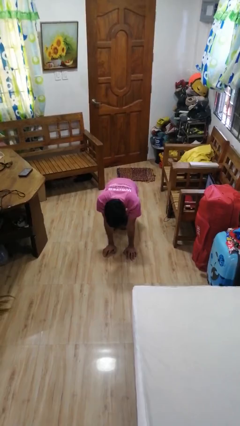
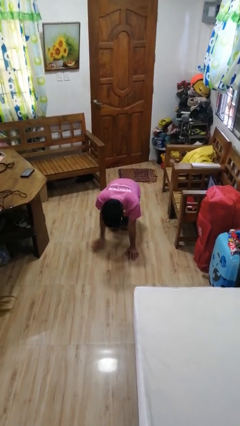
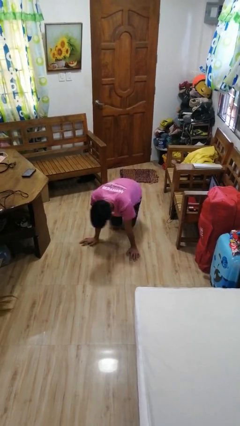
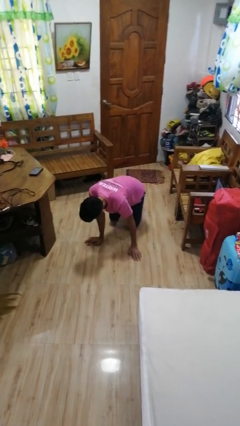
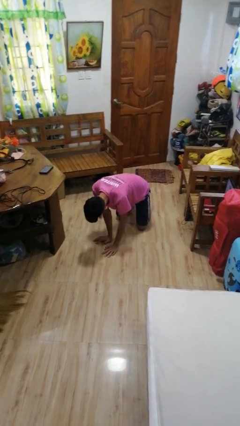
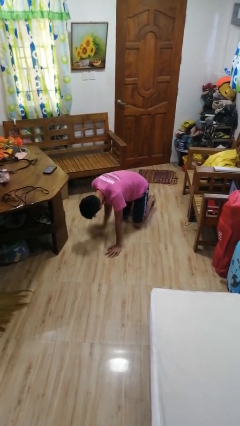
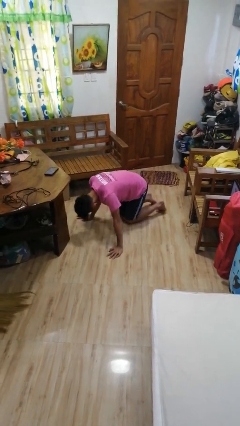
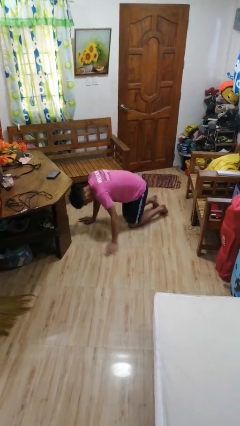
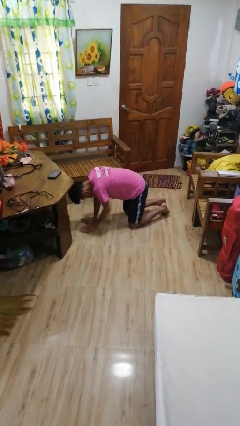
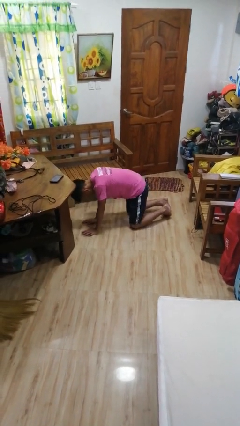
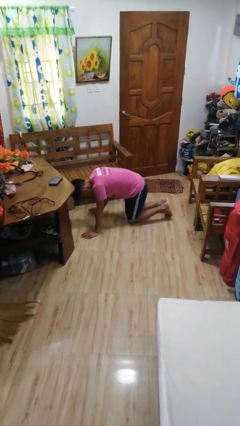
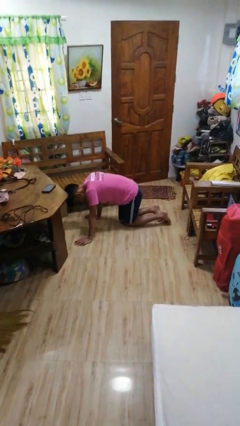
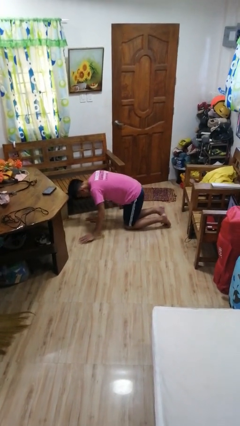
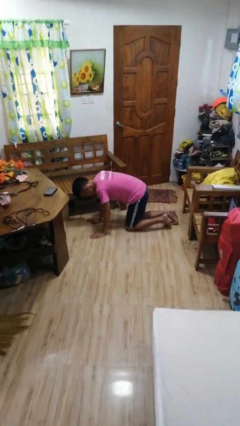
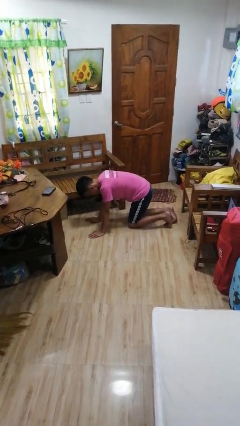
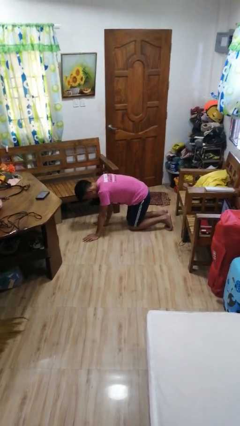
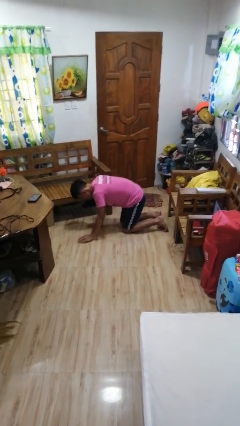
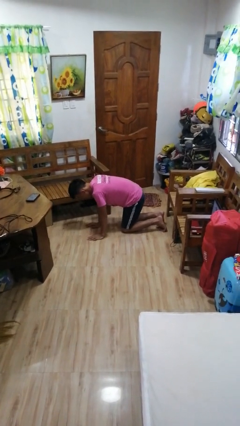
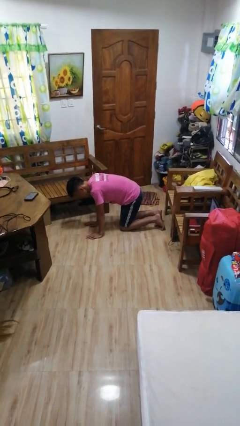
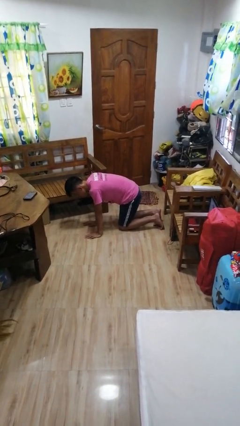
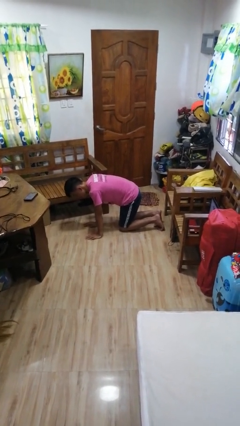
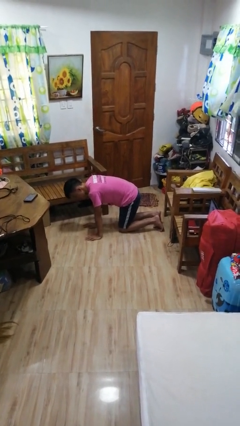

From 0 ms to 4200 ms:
person crawls

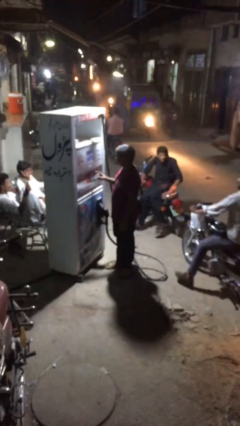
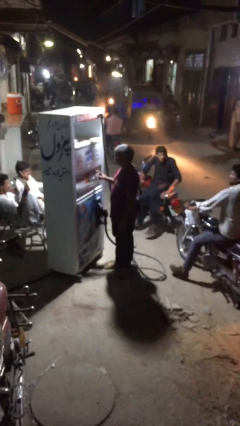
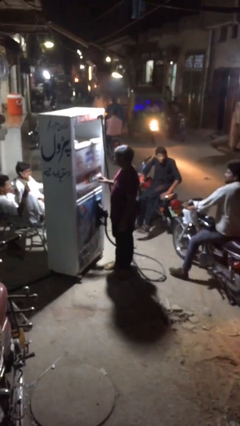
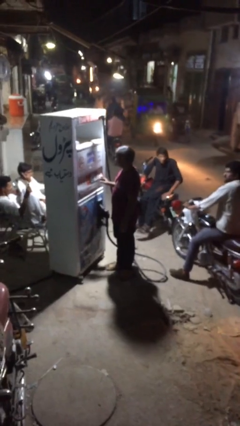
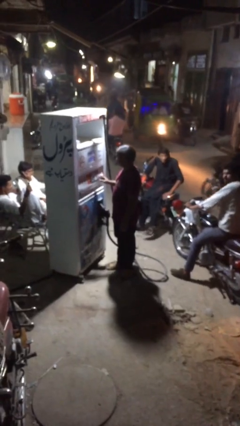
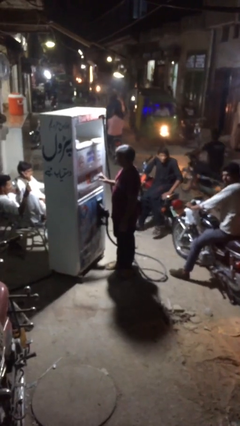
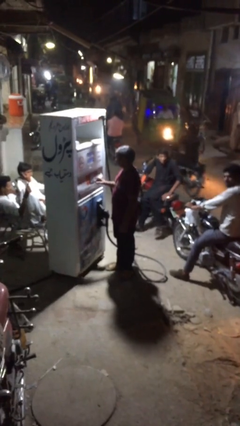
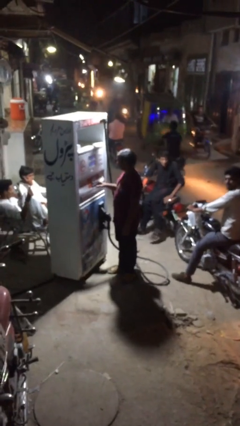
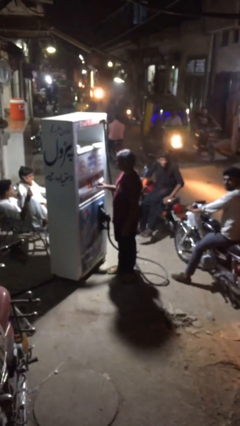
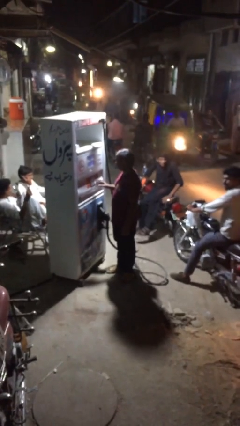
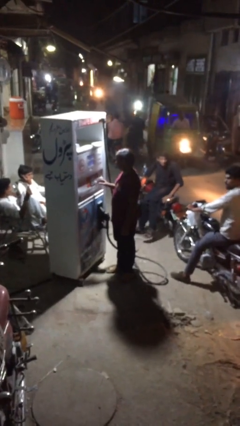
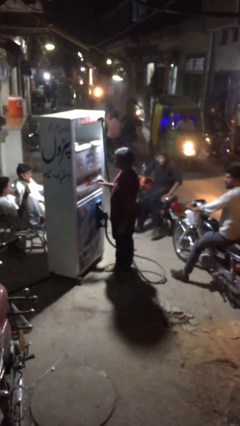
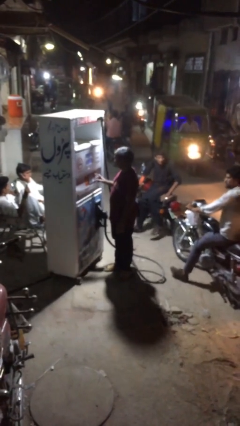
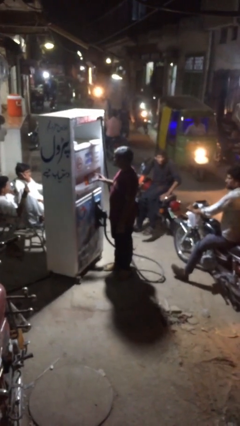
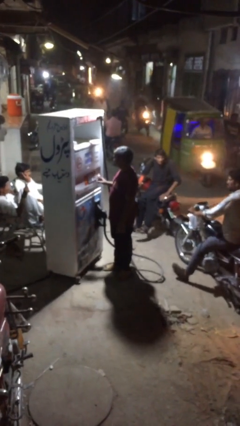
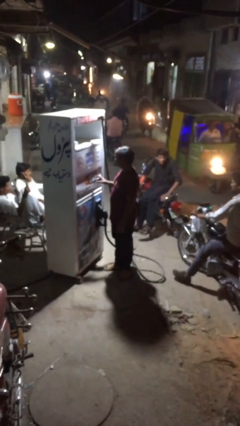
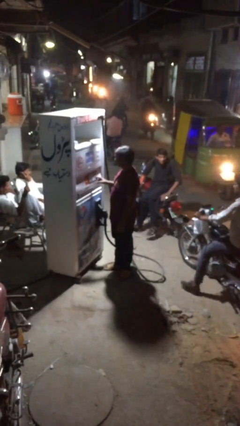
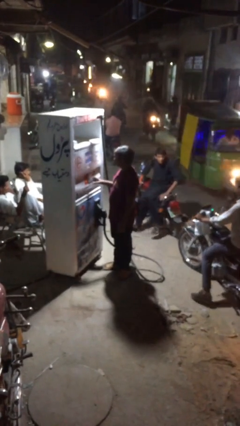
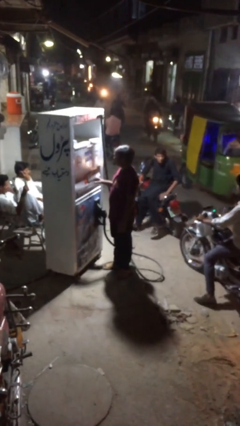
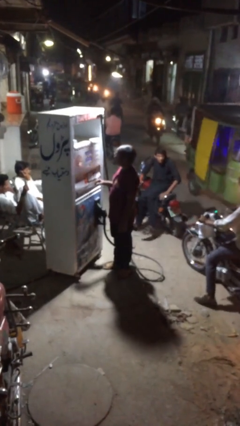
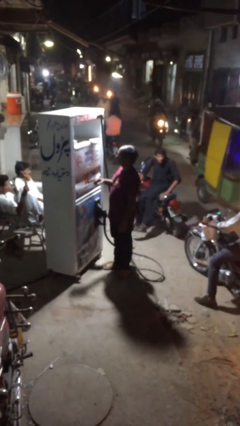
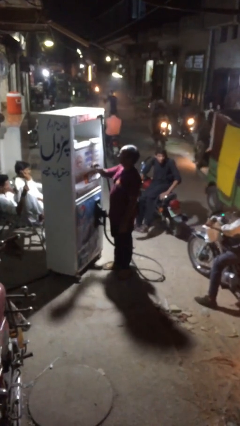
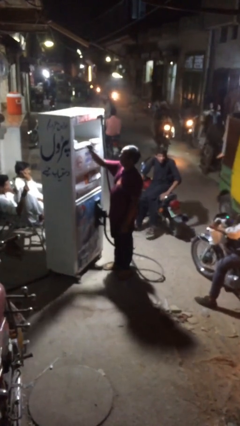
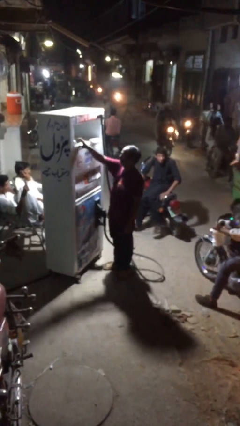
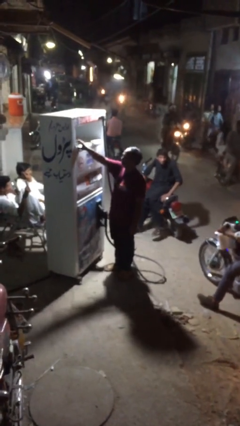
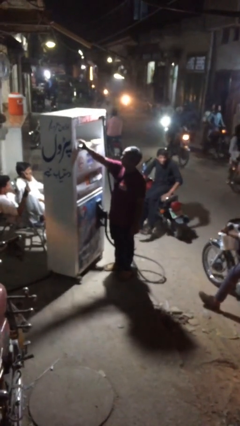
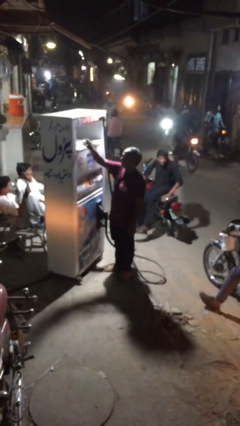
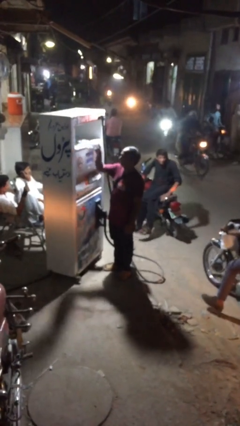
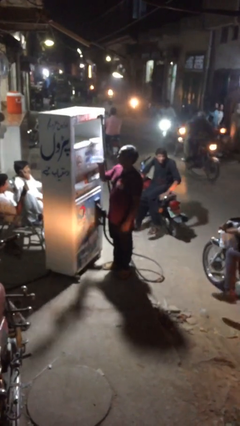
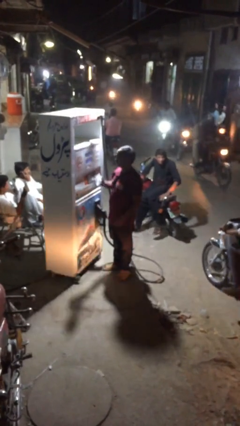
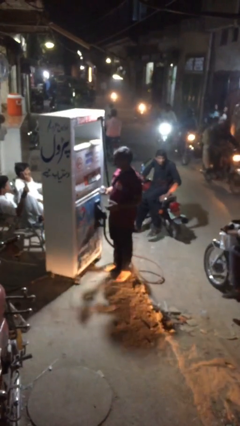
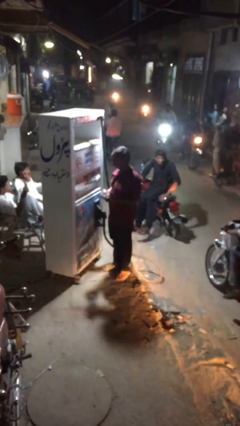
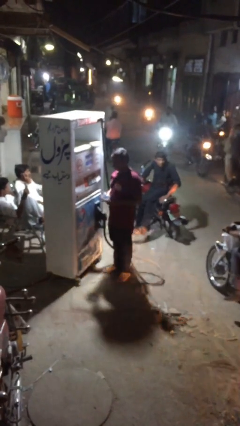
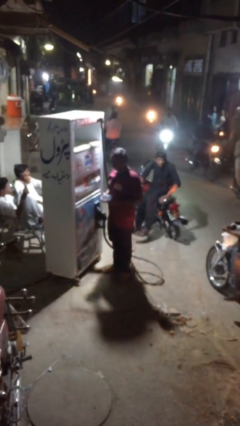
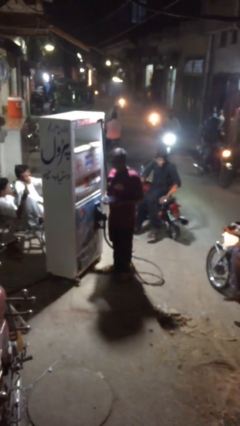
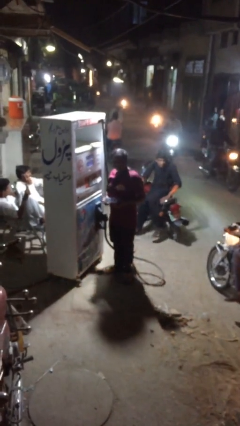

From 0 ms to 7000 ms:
person purchases from machine

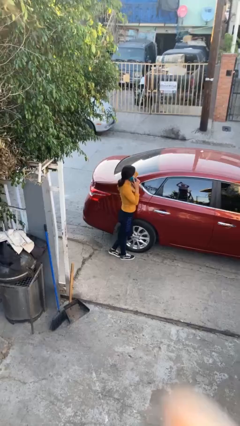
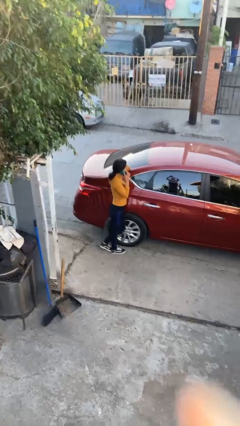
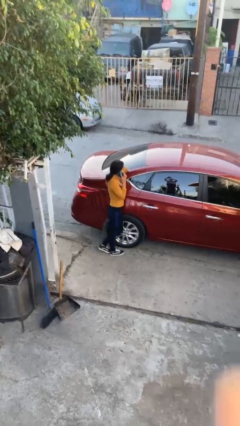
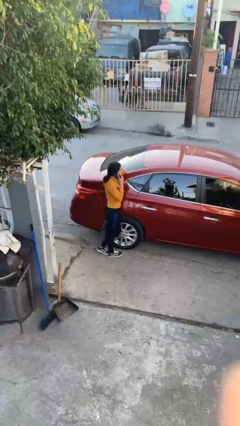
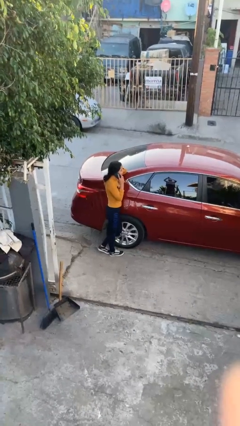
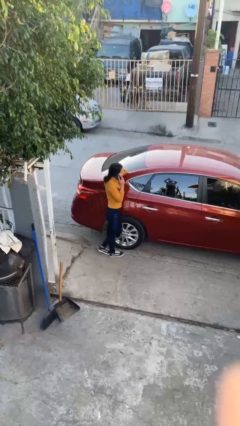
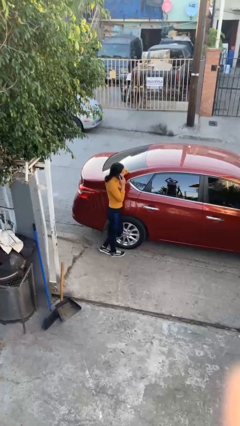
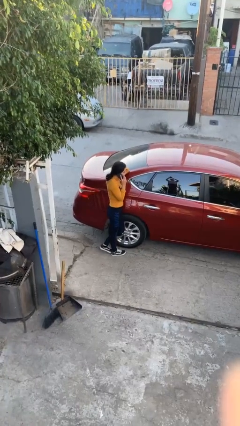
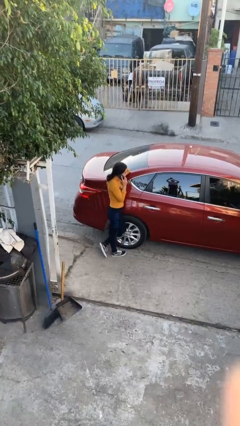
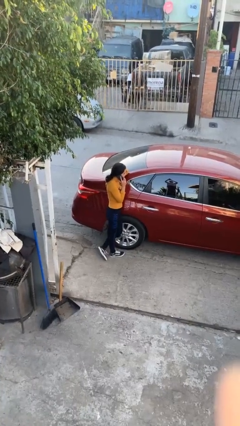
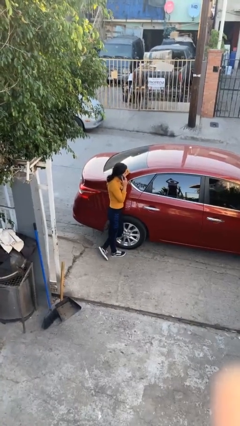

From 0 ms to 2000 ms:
person leans against car

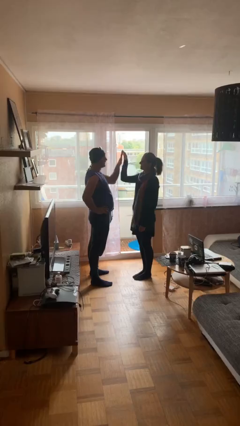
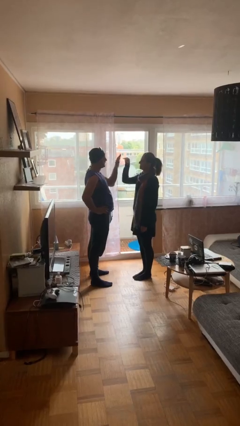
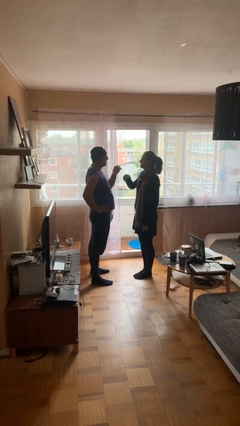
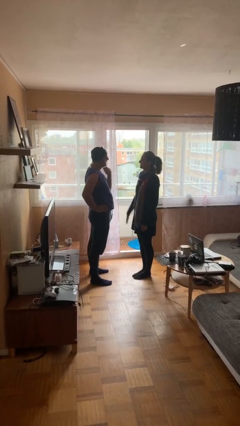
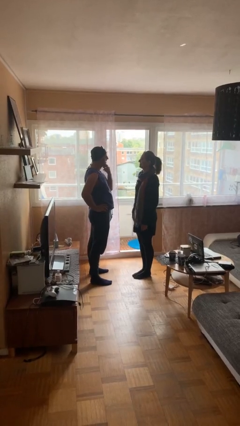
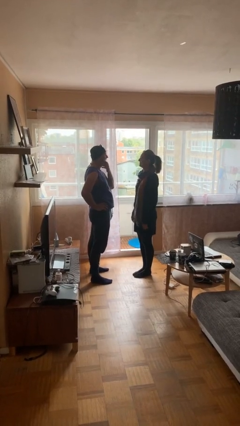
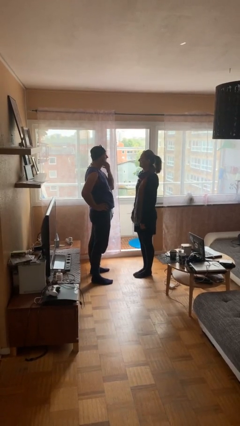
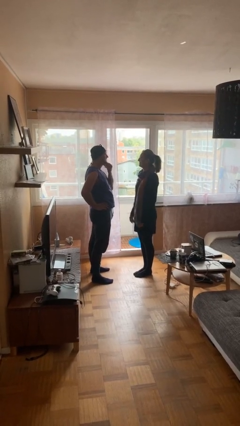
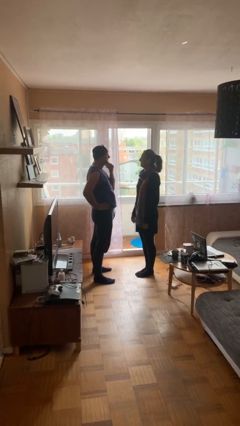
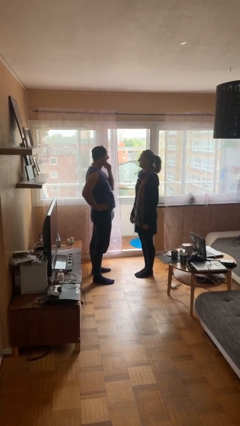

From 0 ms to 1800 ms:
person highfives hand

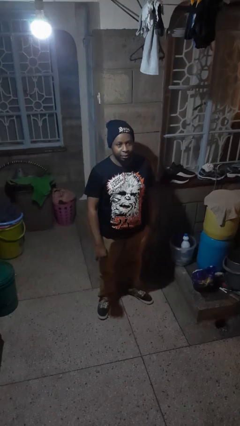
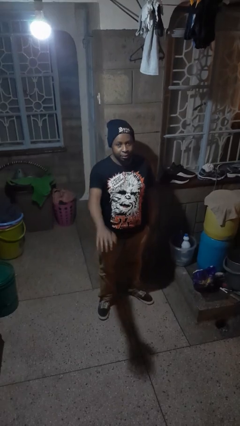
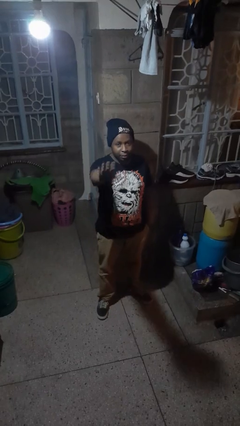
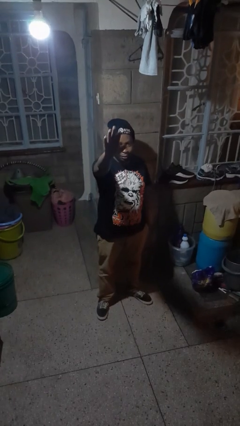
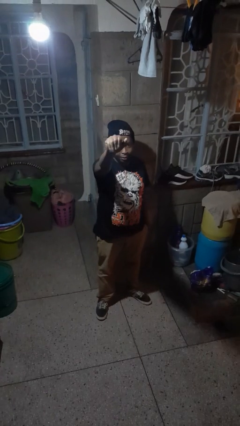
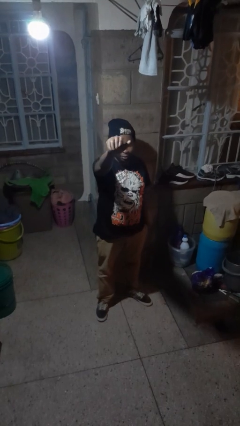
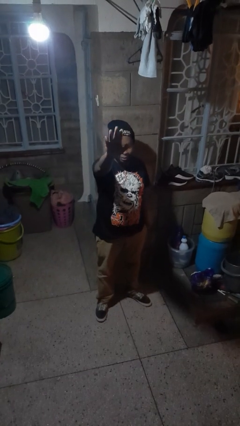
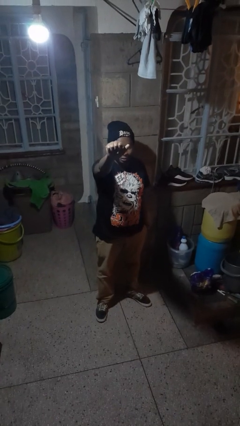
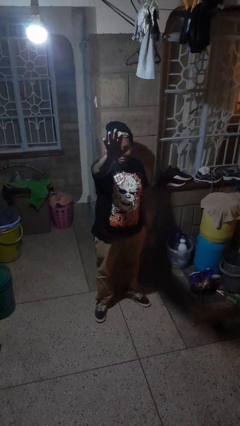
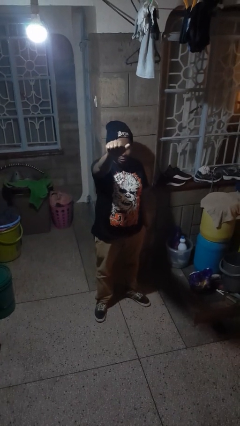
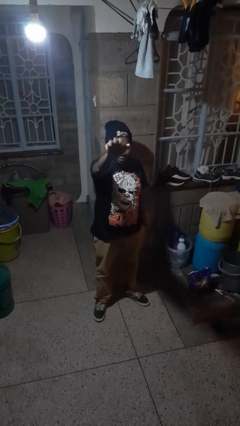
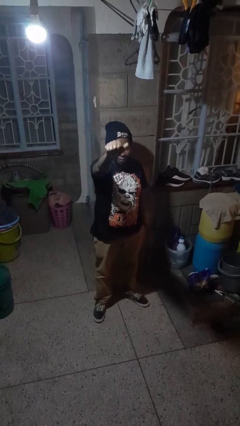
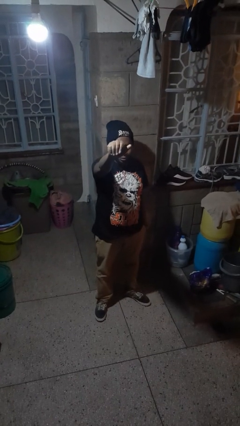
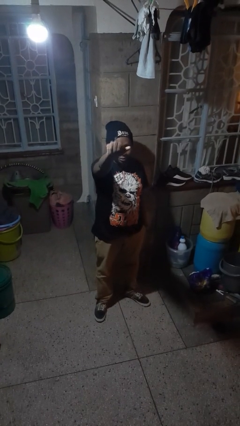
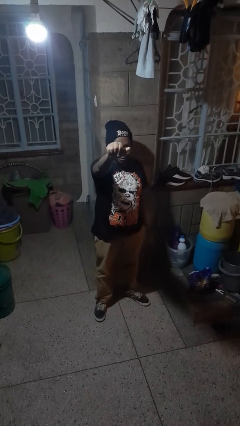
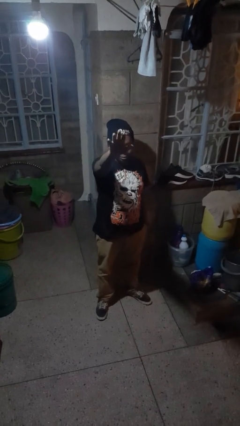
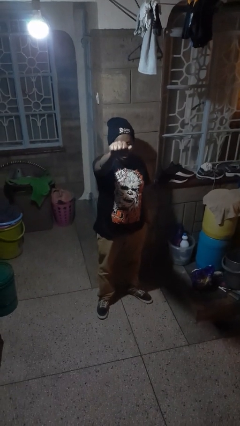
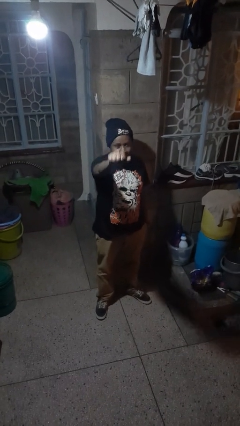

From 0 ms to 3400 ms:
person gestures come here
